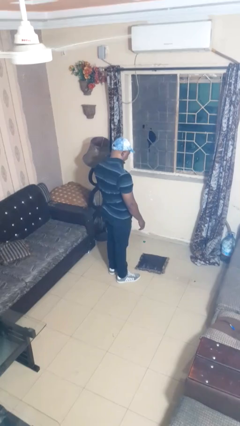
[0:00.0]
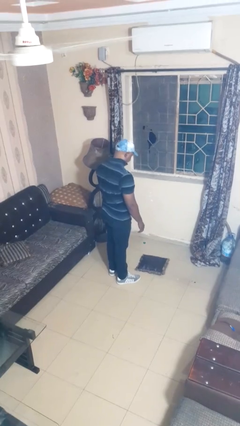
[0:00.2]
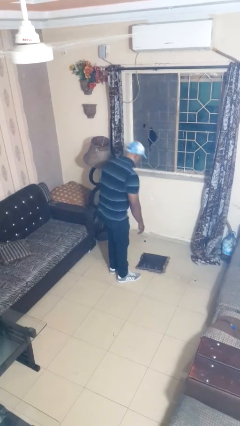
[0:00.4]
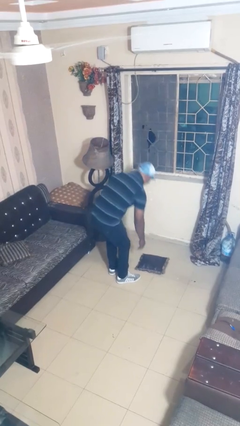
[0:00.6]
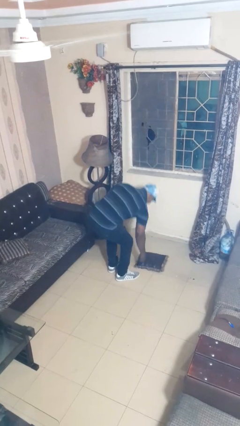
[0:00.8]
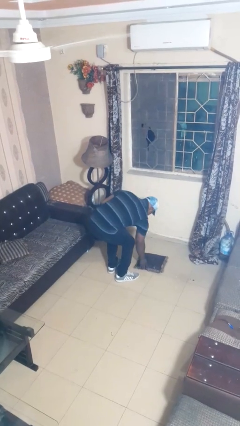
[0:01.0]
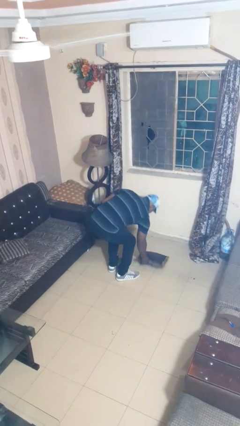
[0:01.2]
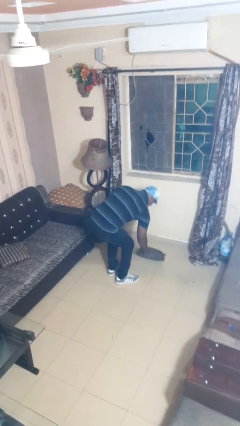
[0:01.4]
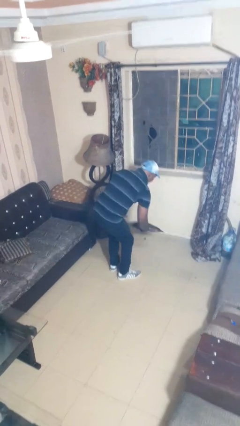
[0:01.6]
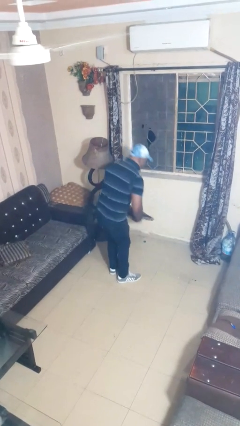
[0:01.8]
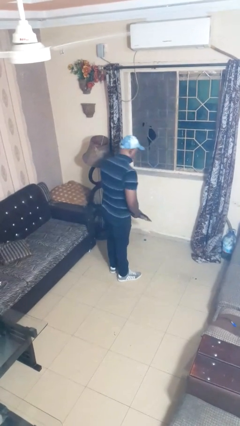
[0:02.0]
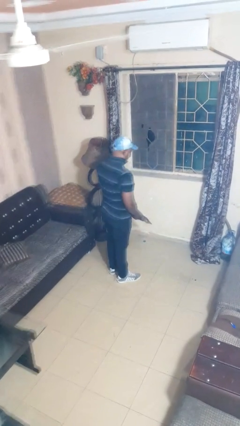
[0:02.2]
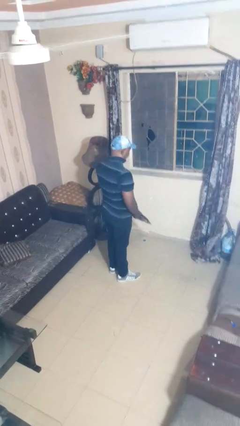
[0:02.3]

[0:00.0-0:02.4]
person picks up object from floor

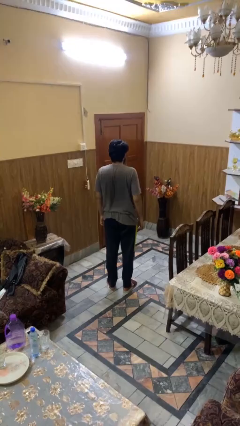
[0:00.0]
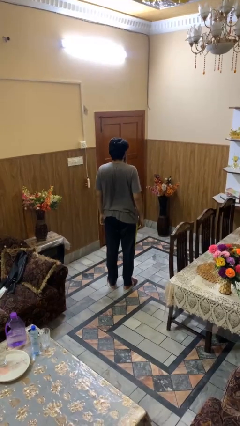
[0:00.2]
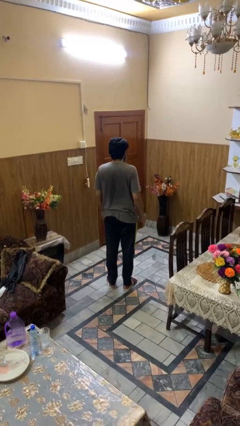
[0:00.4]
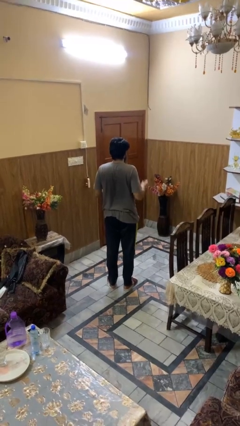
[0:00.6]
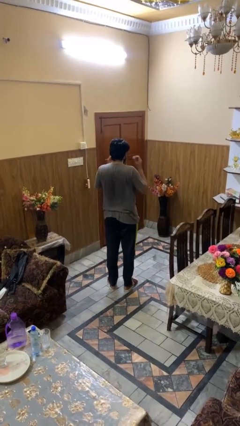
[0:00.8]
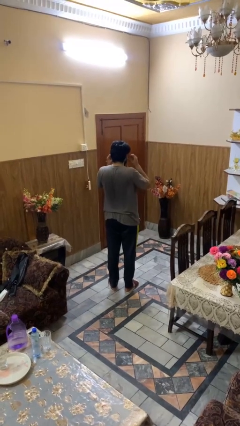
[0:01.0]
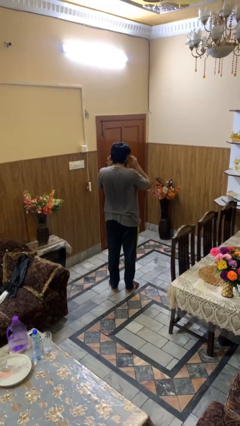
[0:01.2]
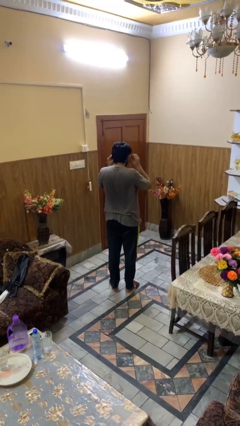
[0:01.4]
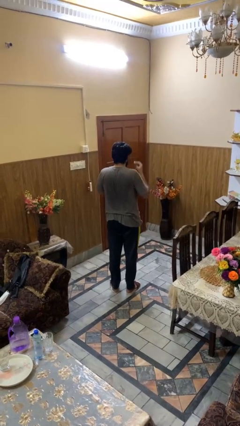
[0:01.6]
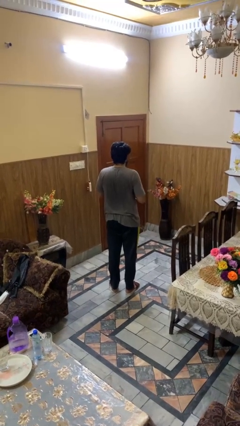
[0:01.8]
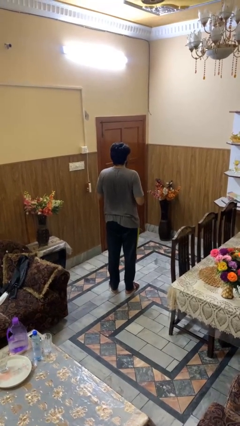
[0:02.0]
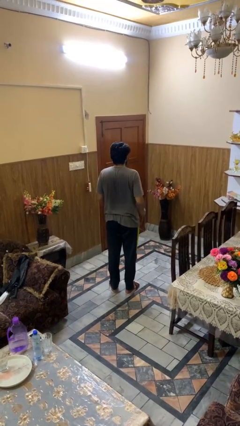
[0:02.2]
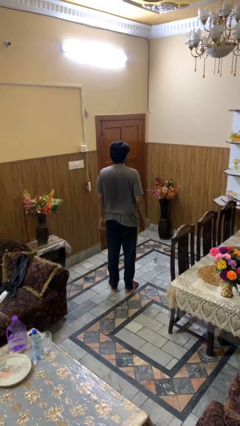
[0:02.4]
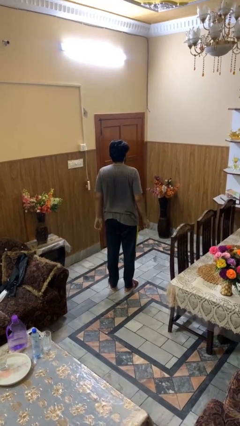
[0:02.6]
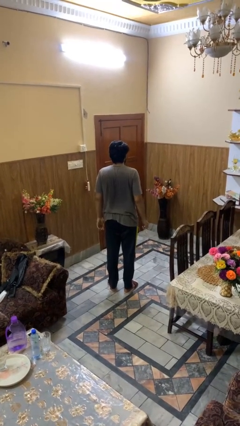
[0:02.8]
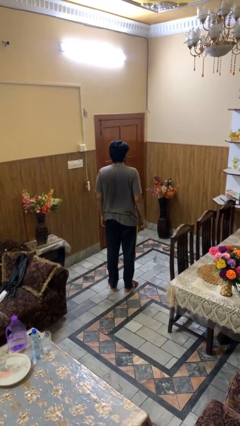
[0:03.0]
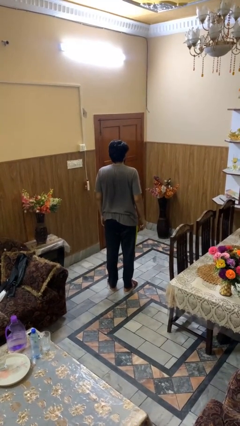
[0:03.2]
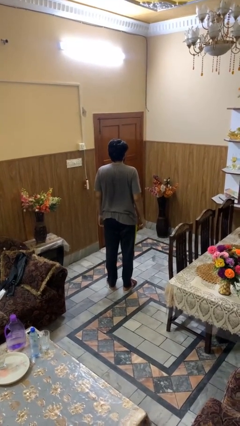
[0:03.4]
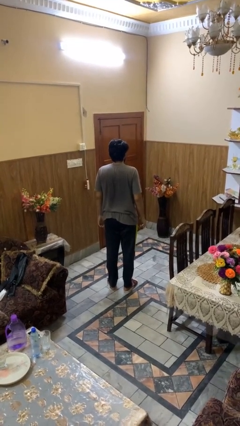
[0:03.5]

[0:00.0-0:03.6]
person takes off headphones

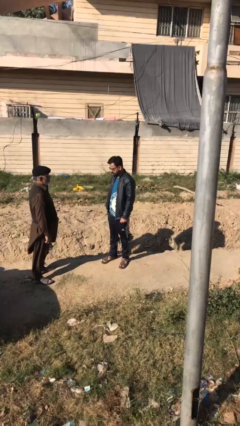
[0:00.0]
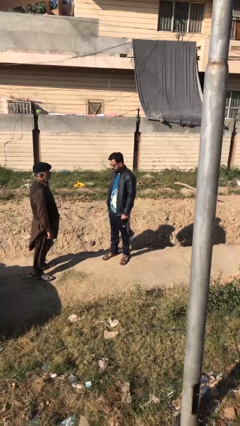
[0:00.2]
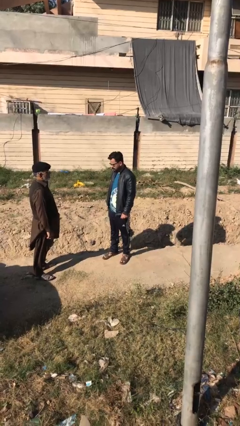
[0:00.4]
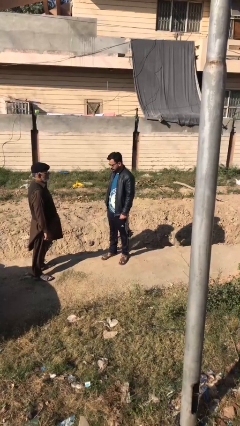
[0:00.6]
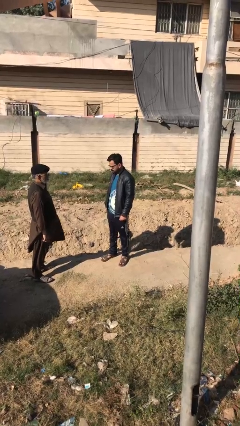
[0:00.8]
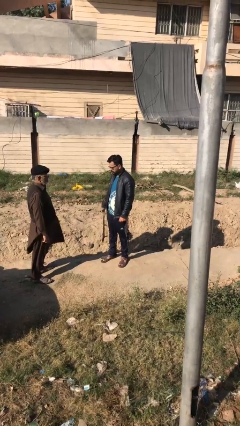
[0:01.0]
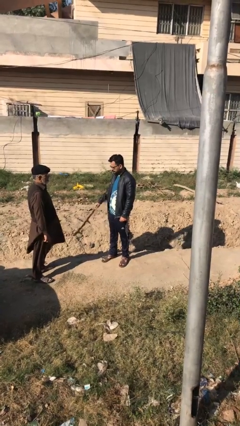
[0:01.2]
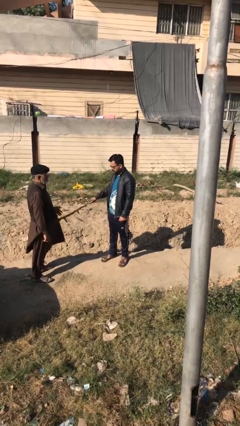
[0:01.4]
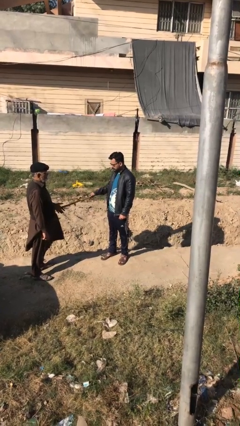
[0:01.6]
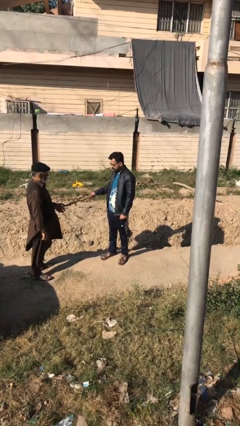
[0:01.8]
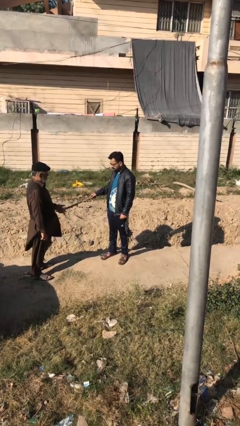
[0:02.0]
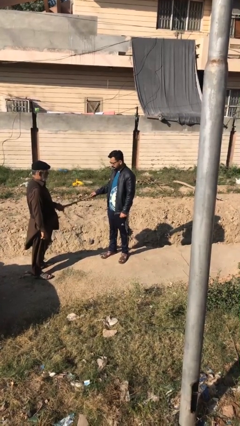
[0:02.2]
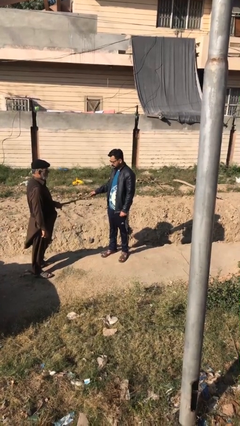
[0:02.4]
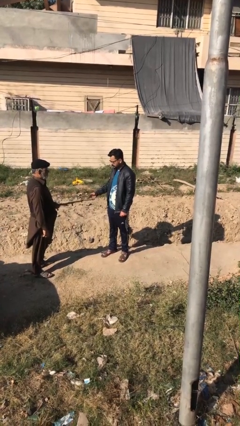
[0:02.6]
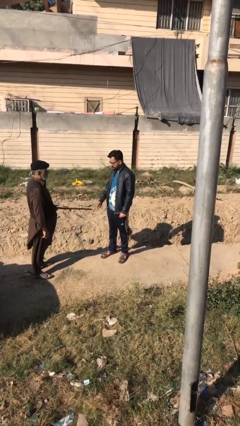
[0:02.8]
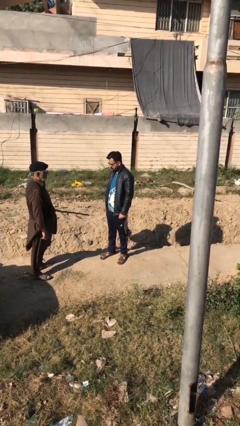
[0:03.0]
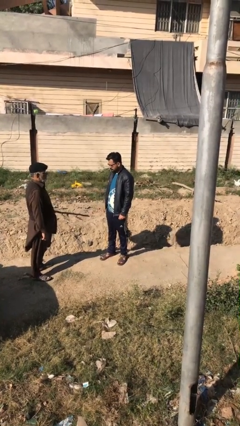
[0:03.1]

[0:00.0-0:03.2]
person transfers object to person

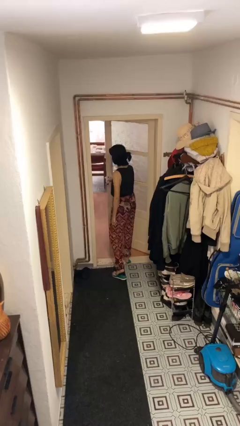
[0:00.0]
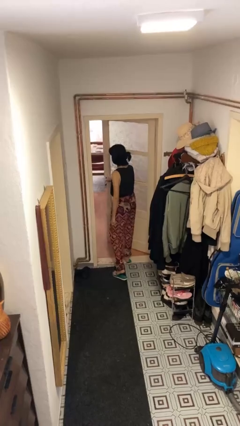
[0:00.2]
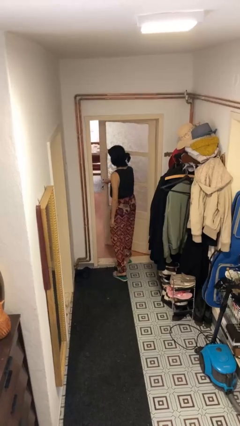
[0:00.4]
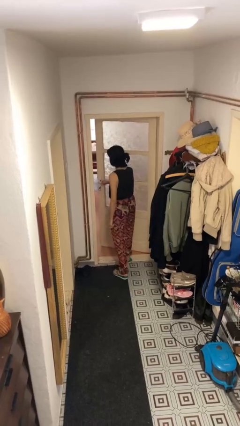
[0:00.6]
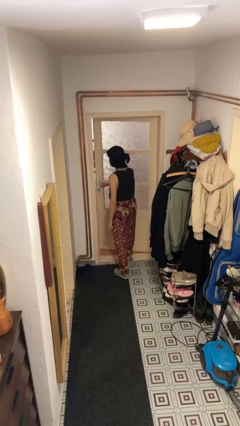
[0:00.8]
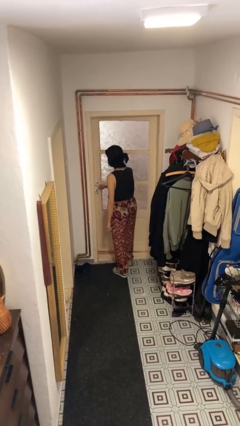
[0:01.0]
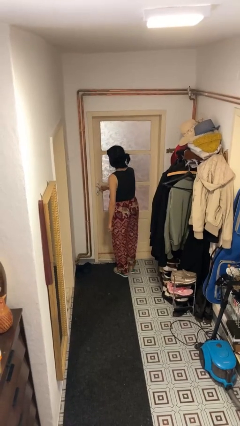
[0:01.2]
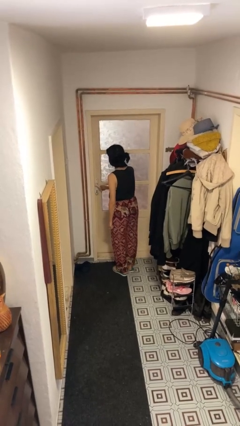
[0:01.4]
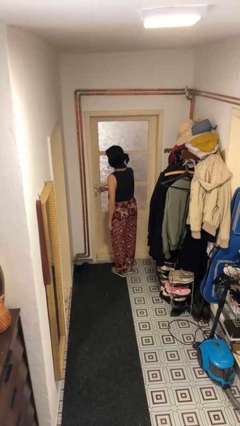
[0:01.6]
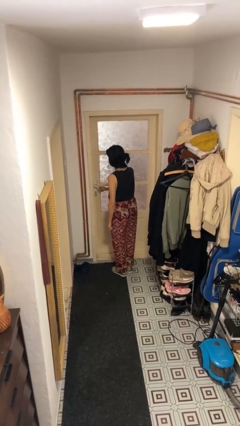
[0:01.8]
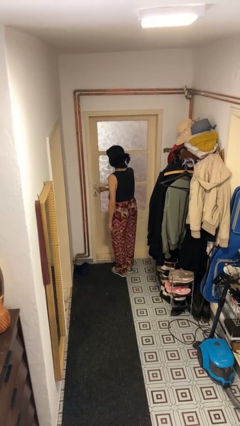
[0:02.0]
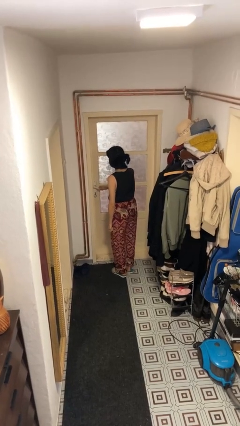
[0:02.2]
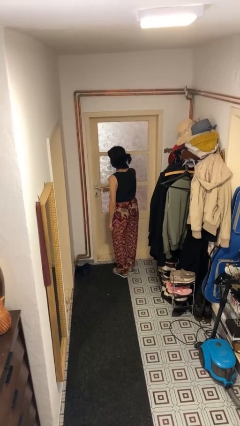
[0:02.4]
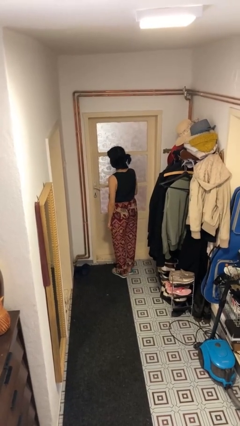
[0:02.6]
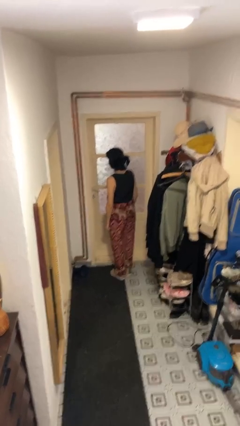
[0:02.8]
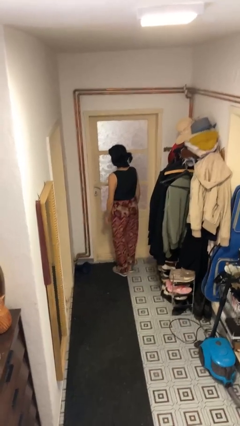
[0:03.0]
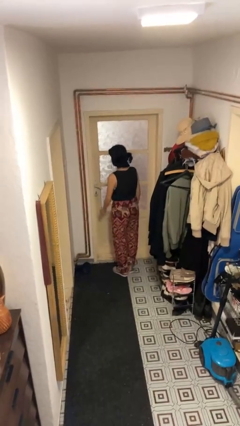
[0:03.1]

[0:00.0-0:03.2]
person closes facility door

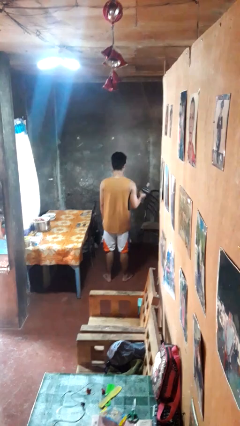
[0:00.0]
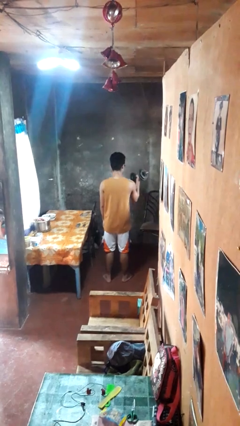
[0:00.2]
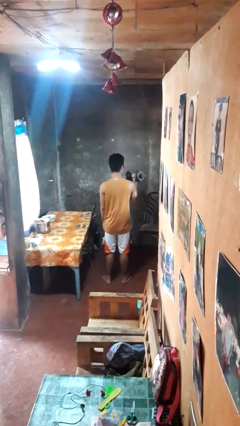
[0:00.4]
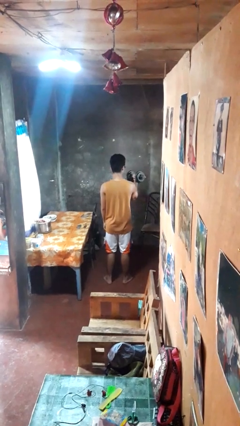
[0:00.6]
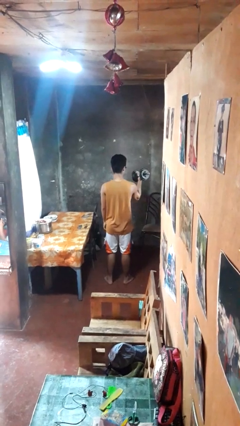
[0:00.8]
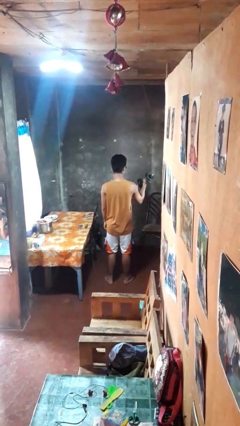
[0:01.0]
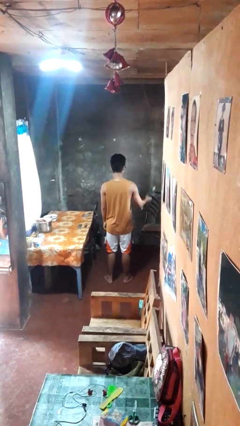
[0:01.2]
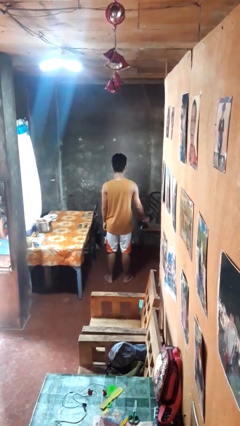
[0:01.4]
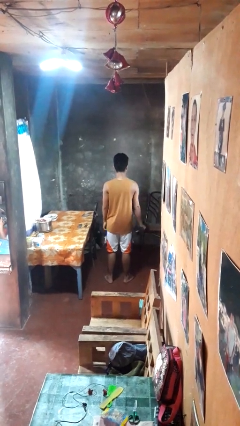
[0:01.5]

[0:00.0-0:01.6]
person lifts dumbbells

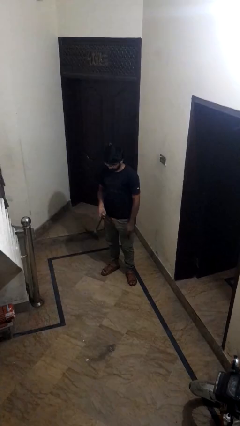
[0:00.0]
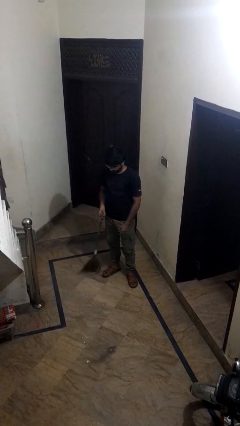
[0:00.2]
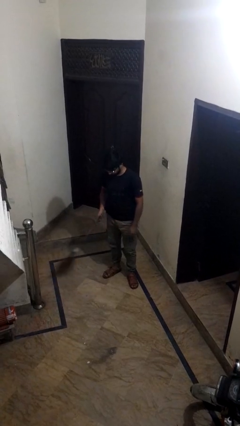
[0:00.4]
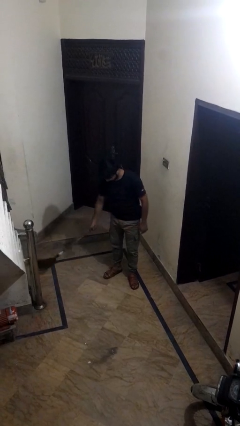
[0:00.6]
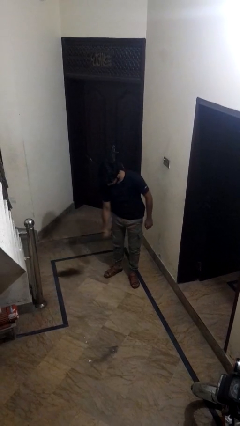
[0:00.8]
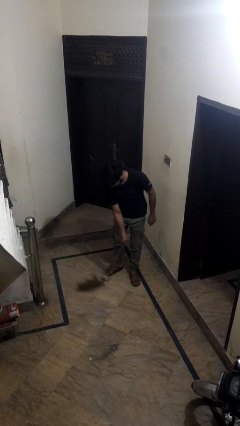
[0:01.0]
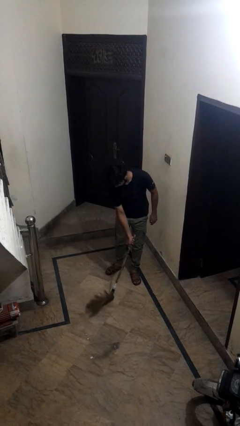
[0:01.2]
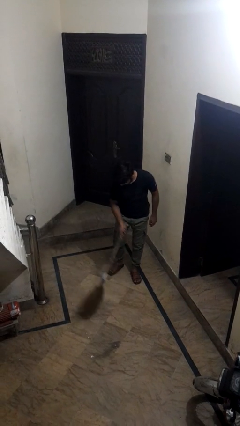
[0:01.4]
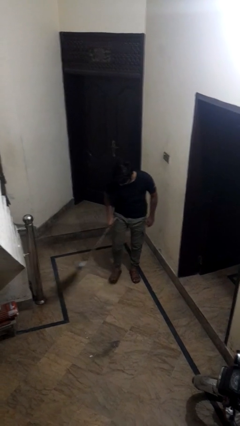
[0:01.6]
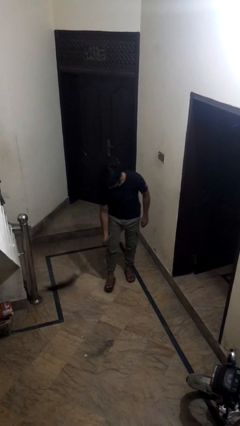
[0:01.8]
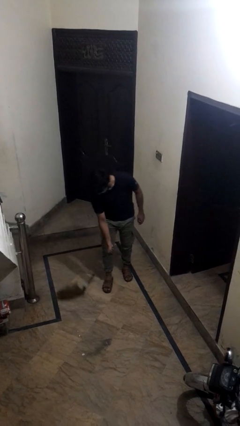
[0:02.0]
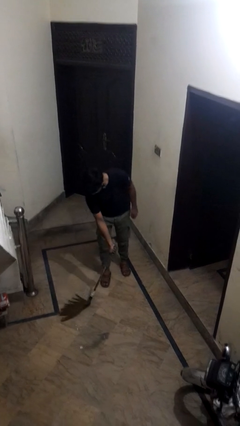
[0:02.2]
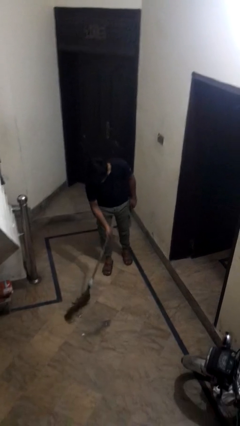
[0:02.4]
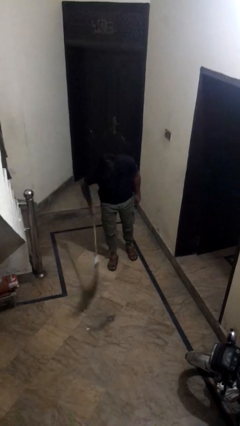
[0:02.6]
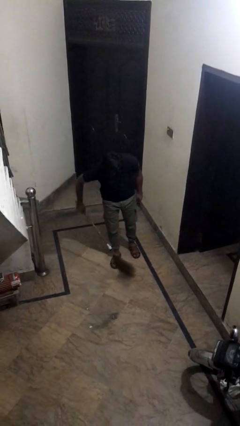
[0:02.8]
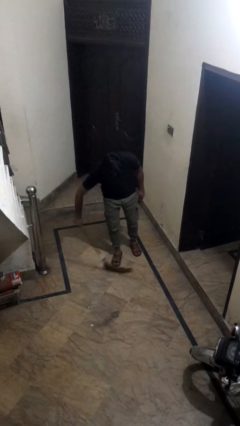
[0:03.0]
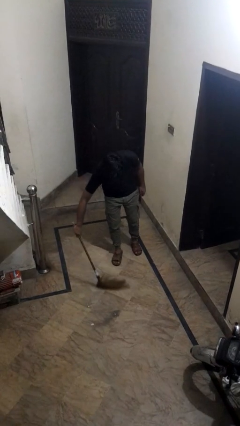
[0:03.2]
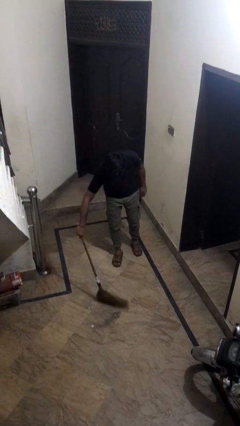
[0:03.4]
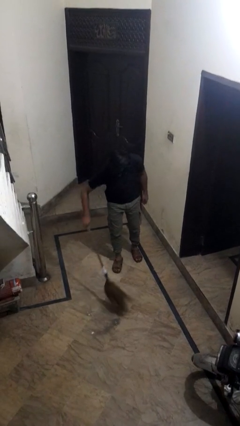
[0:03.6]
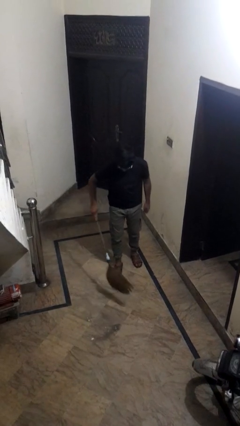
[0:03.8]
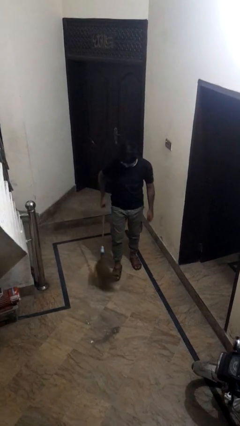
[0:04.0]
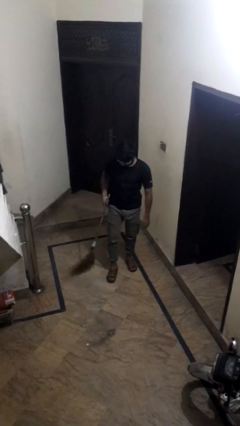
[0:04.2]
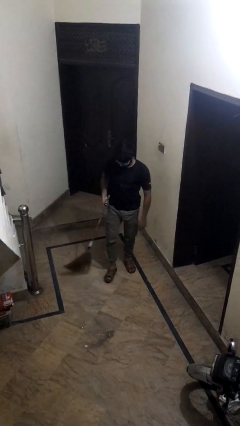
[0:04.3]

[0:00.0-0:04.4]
person sweeps floor
